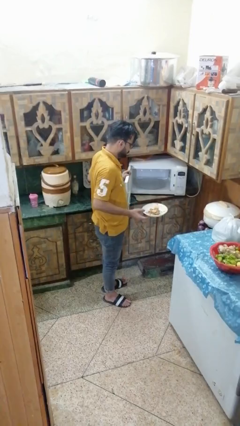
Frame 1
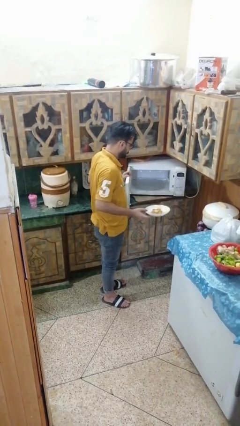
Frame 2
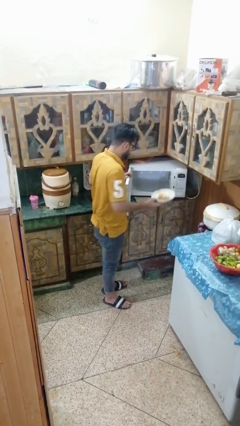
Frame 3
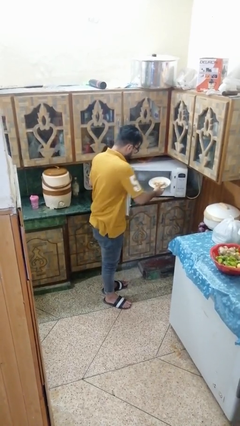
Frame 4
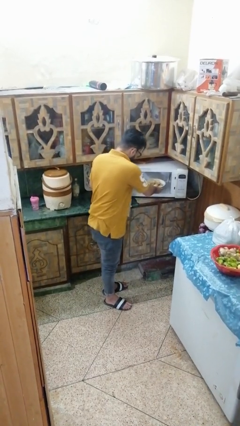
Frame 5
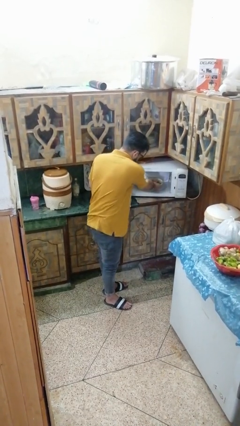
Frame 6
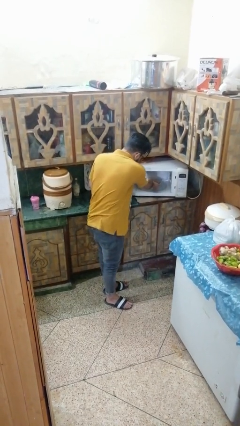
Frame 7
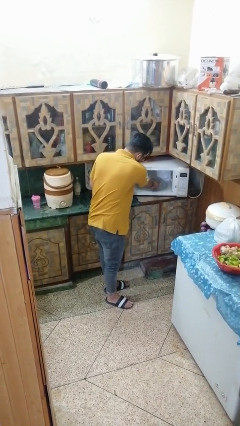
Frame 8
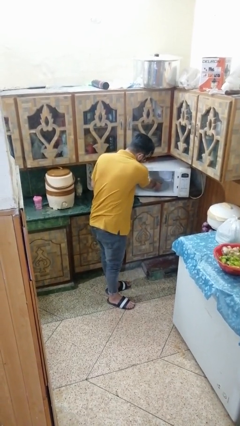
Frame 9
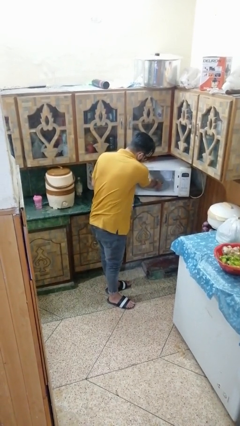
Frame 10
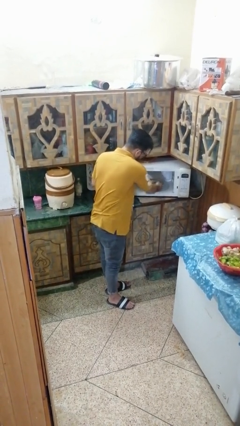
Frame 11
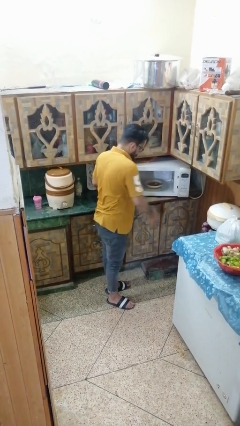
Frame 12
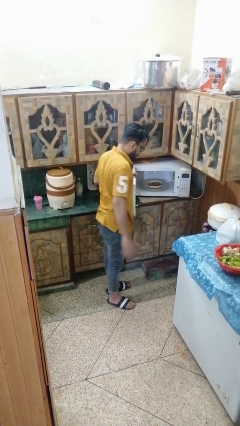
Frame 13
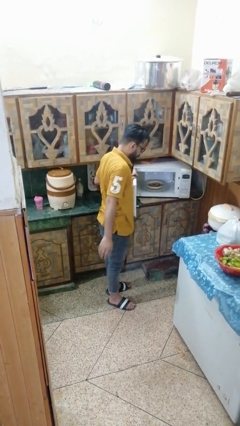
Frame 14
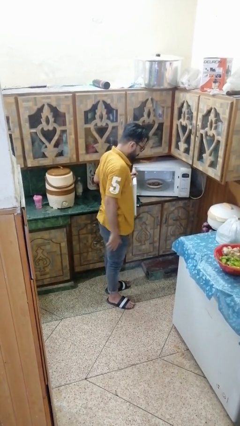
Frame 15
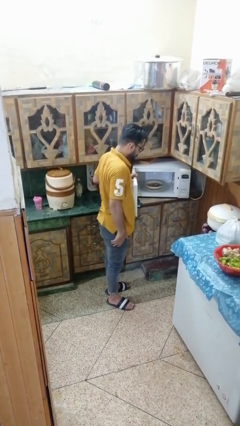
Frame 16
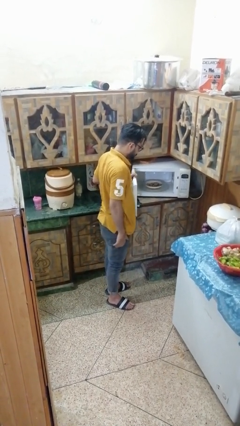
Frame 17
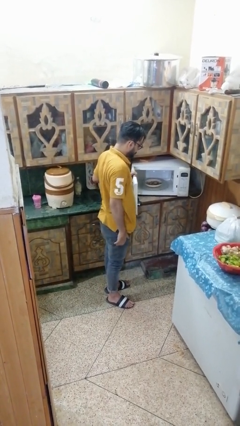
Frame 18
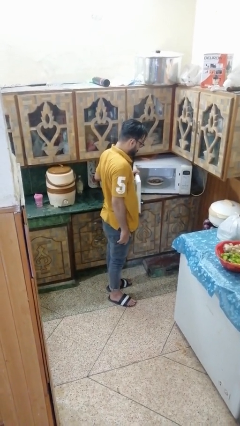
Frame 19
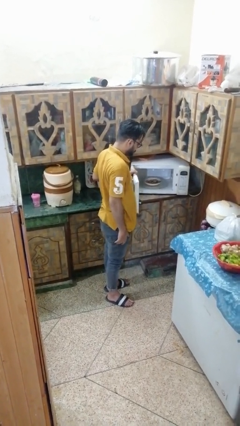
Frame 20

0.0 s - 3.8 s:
person puts object into microwave

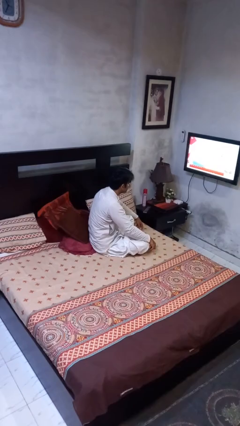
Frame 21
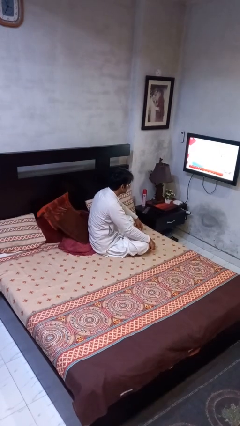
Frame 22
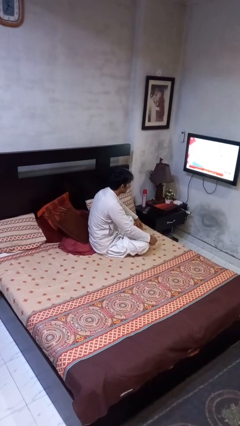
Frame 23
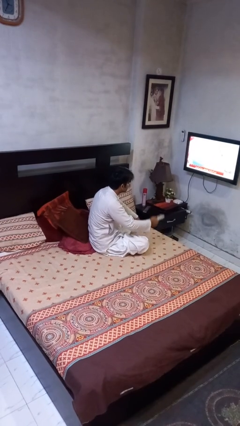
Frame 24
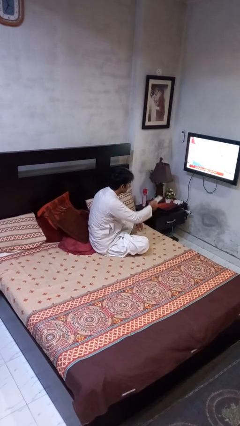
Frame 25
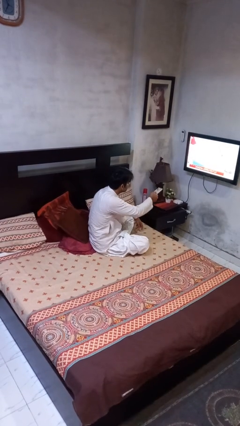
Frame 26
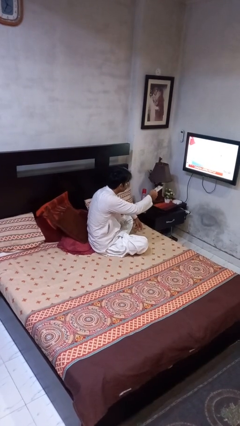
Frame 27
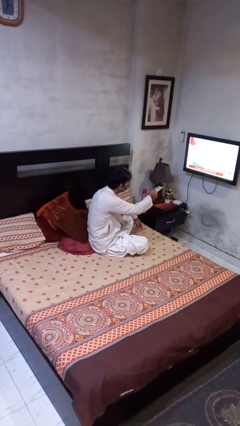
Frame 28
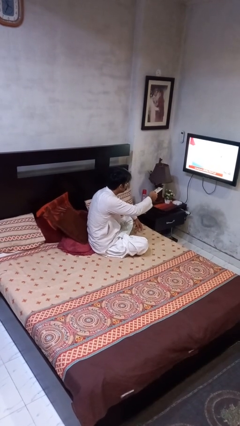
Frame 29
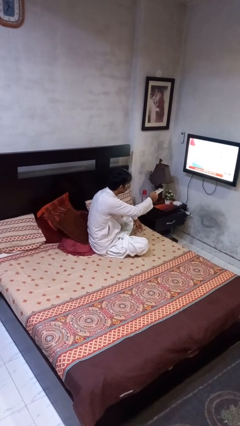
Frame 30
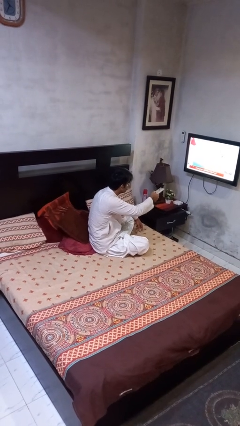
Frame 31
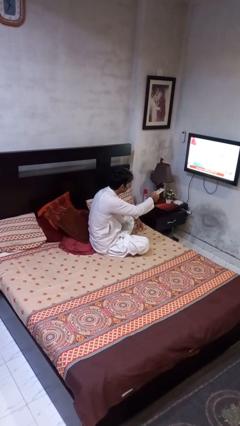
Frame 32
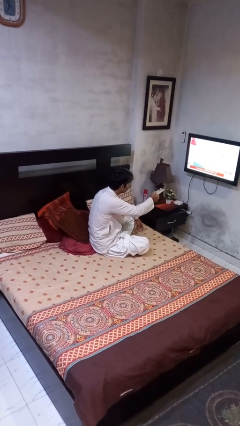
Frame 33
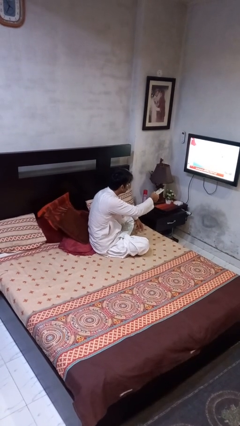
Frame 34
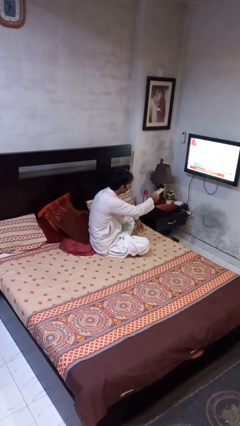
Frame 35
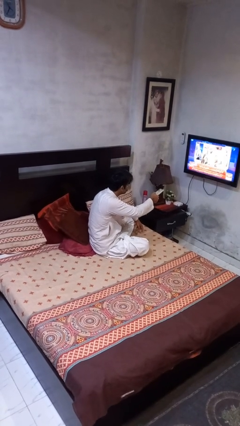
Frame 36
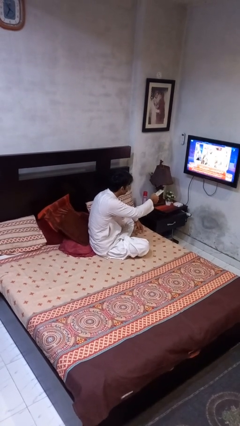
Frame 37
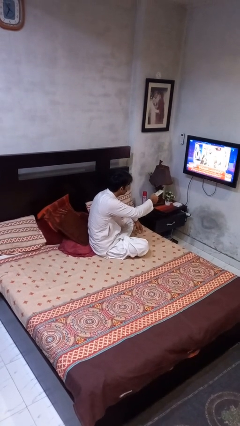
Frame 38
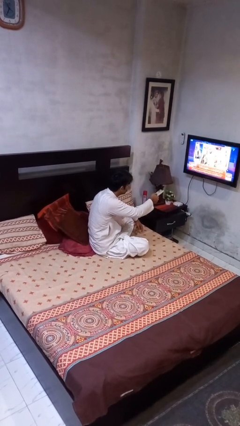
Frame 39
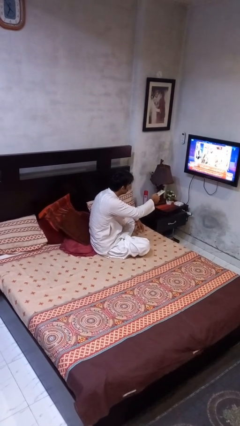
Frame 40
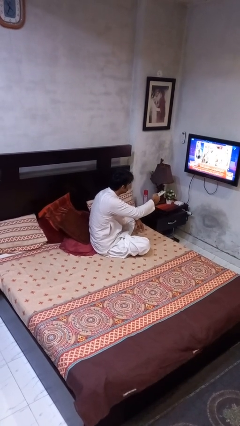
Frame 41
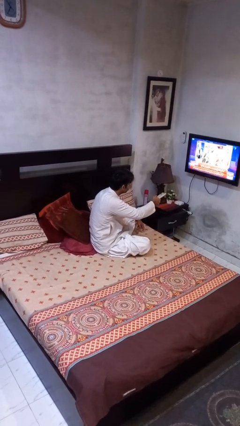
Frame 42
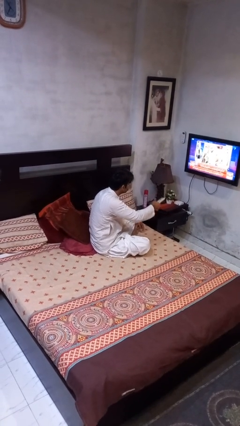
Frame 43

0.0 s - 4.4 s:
person uses television remote

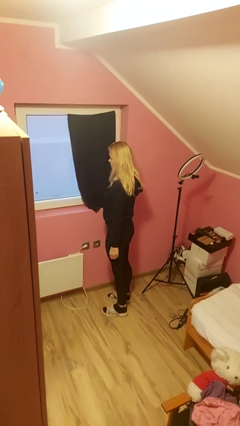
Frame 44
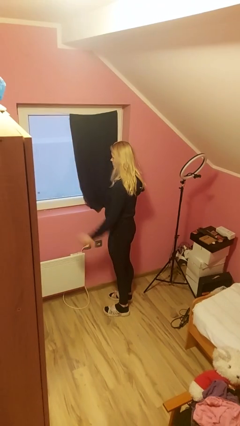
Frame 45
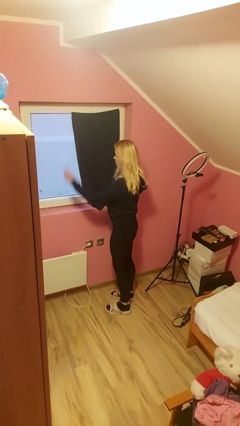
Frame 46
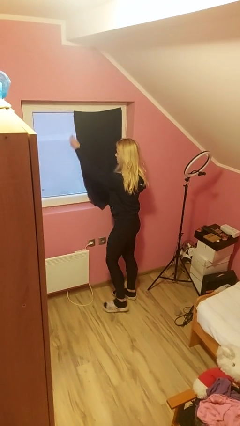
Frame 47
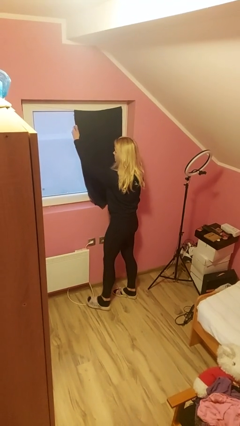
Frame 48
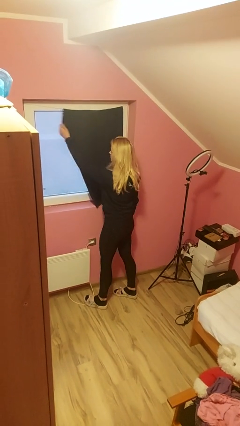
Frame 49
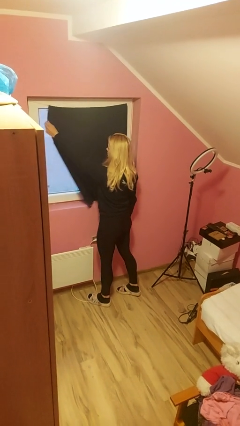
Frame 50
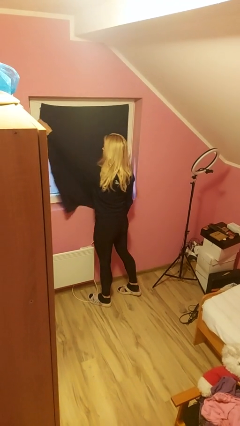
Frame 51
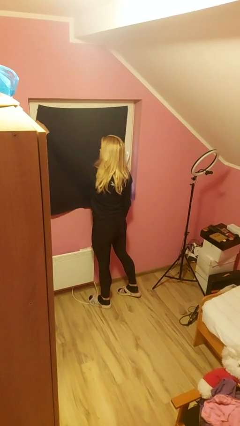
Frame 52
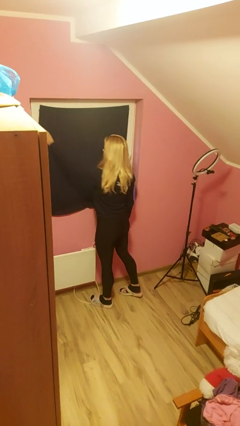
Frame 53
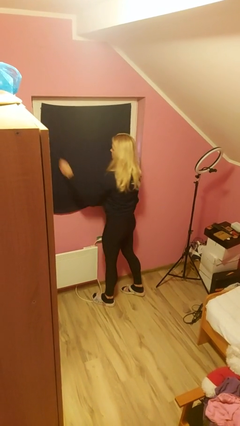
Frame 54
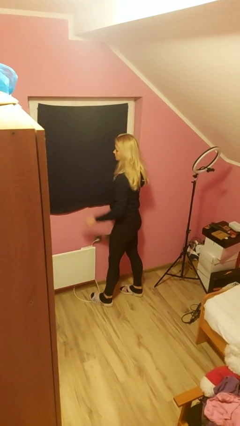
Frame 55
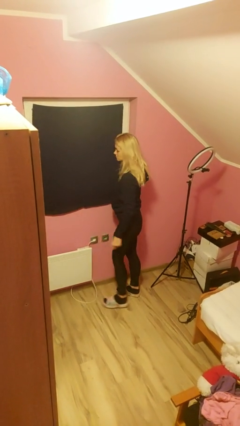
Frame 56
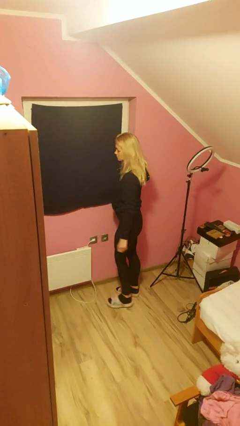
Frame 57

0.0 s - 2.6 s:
person closes curtains

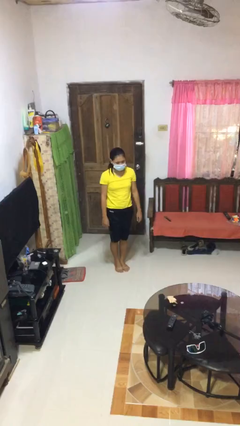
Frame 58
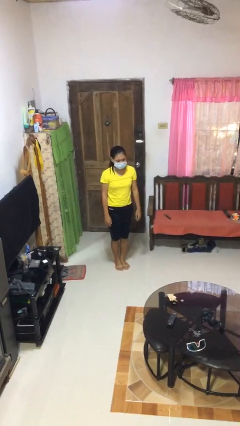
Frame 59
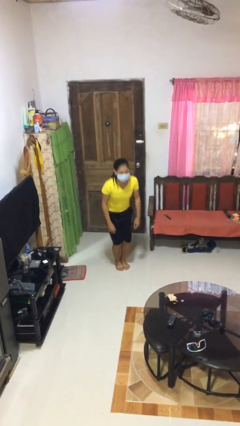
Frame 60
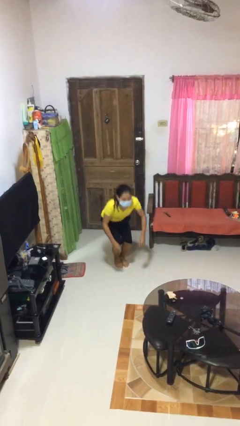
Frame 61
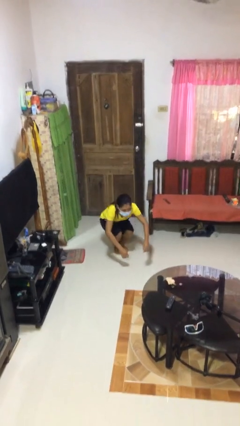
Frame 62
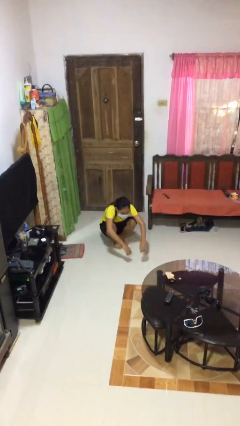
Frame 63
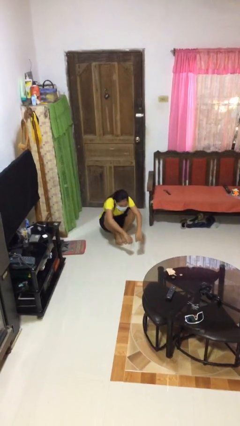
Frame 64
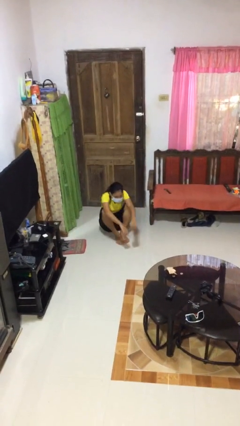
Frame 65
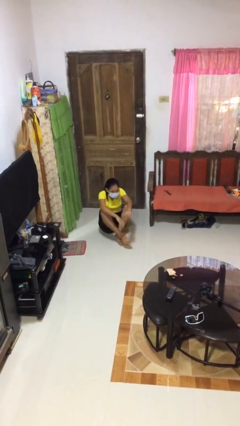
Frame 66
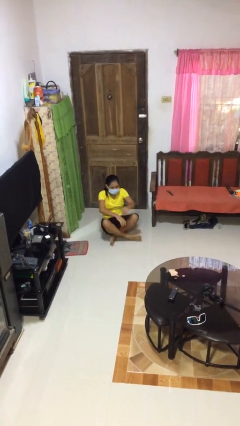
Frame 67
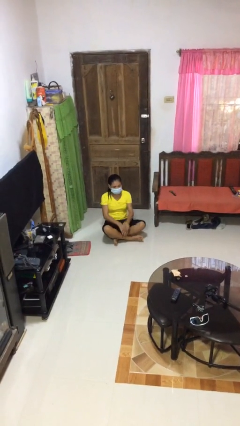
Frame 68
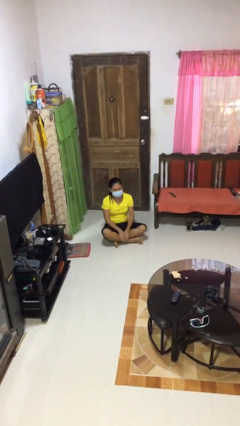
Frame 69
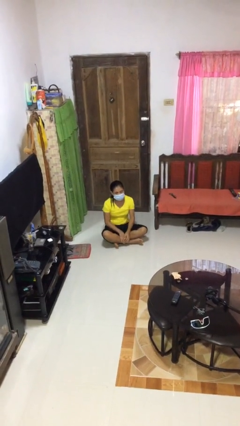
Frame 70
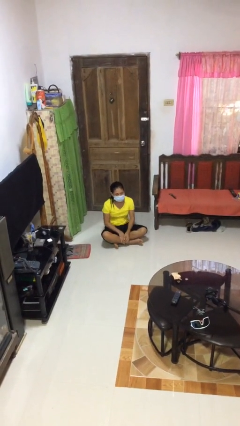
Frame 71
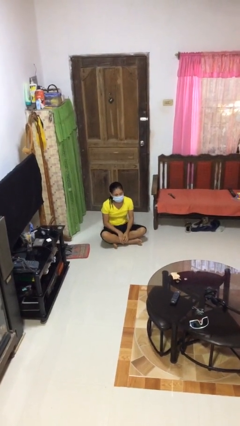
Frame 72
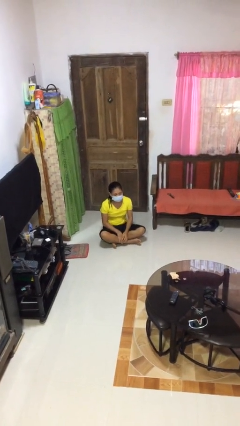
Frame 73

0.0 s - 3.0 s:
person sits crisscross

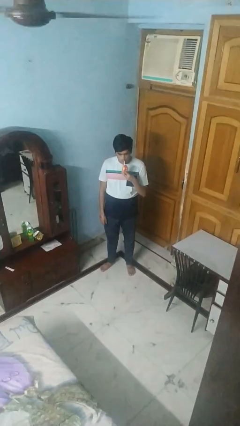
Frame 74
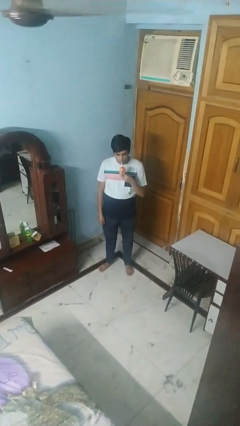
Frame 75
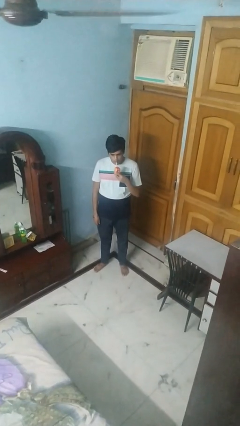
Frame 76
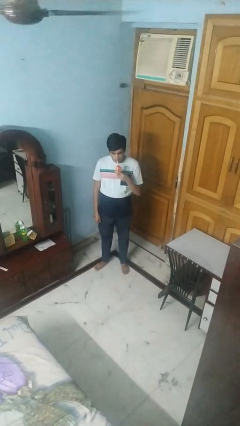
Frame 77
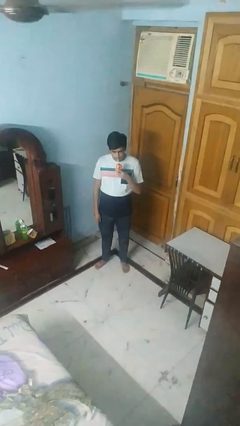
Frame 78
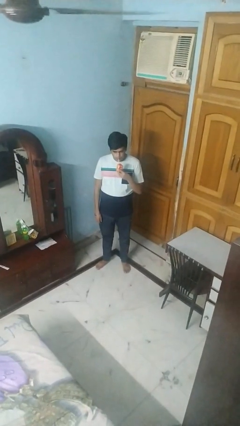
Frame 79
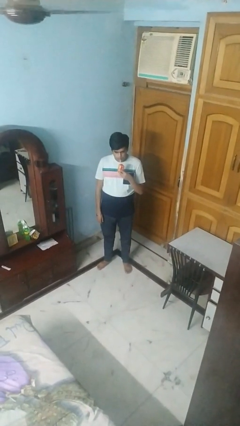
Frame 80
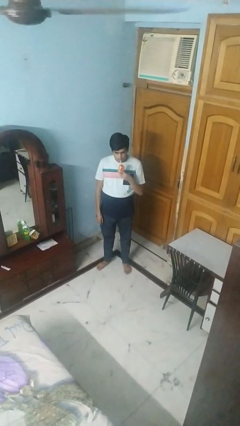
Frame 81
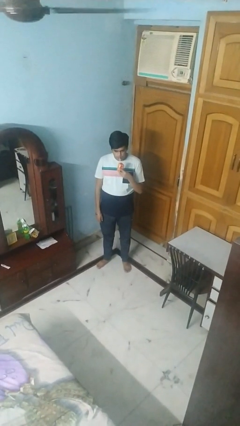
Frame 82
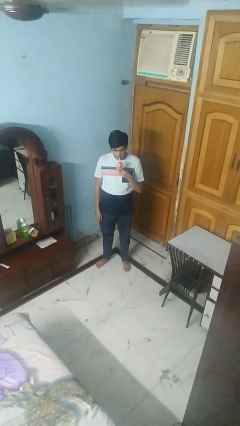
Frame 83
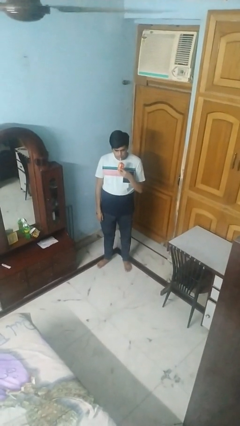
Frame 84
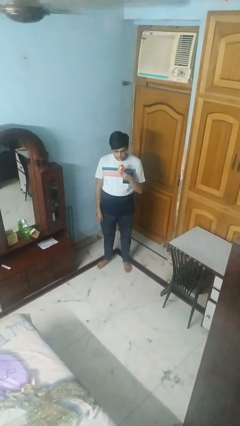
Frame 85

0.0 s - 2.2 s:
person drinks from straw

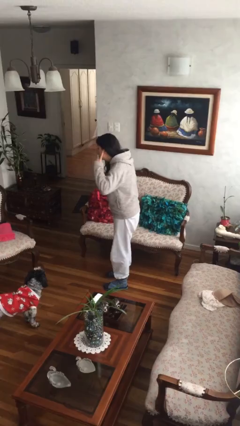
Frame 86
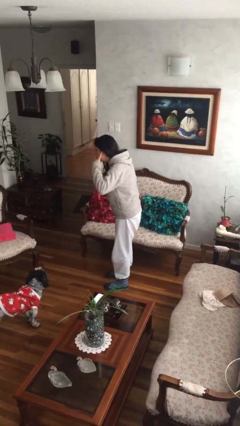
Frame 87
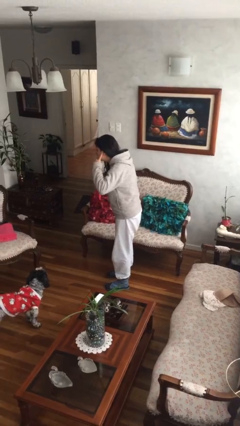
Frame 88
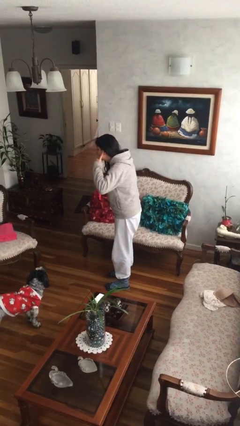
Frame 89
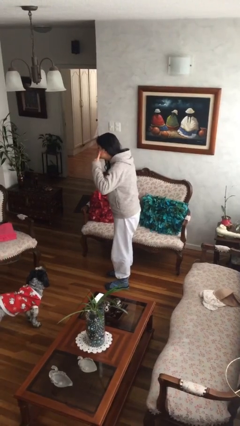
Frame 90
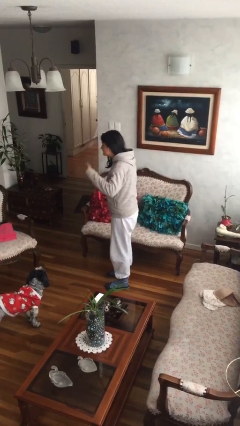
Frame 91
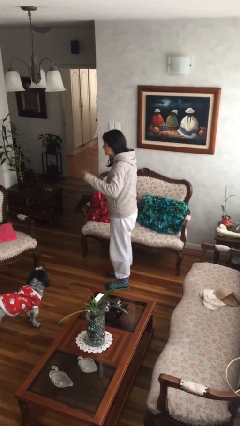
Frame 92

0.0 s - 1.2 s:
person gestures listen closely

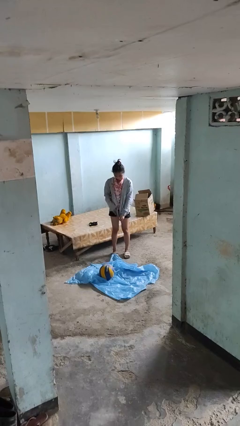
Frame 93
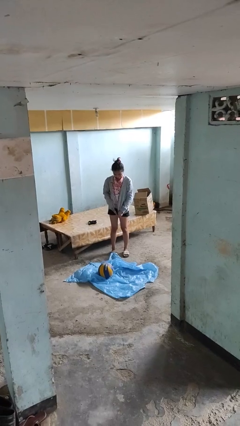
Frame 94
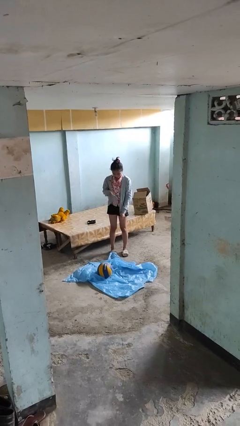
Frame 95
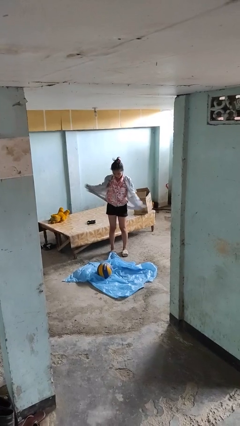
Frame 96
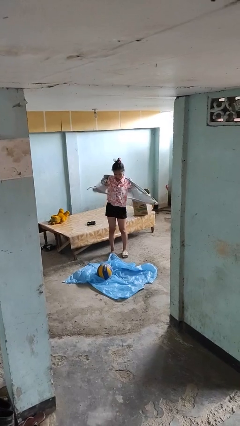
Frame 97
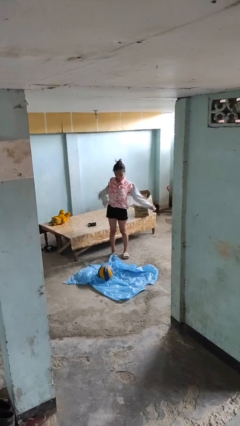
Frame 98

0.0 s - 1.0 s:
person unzips jacket
